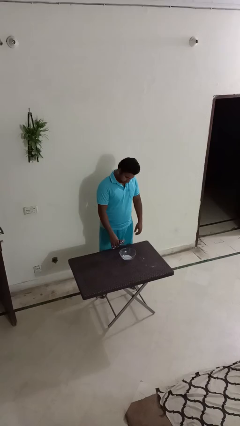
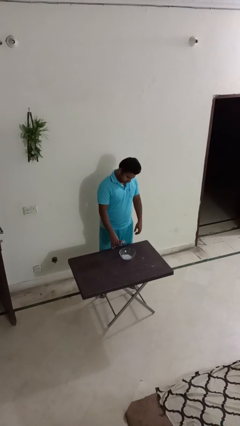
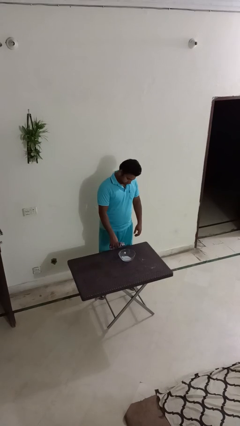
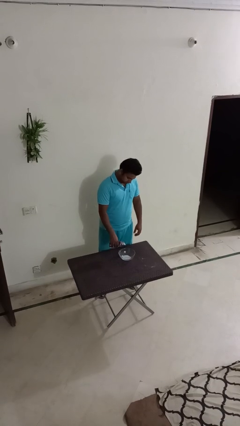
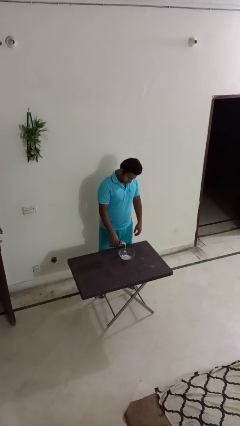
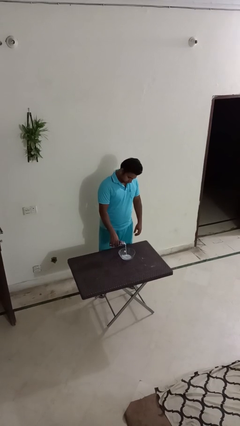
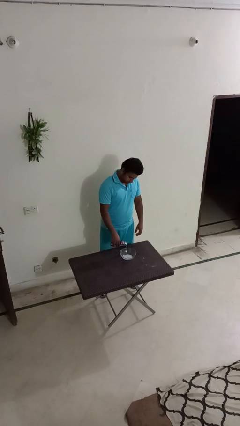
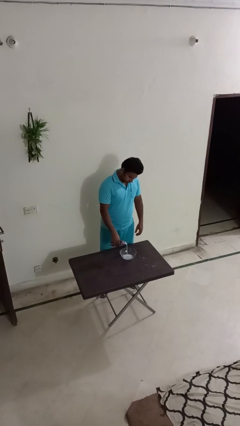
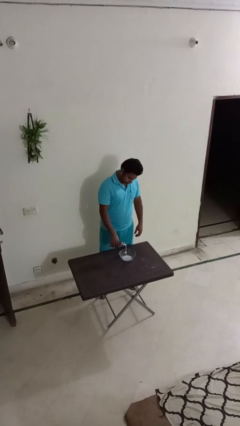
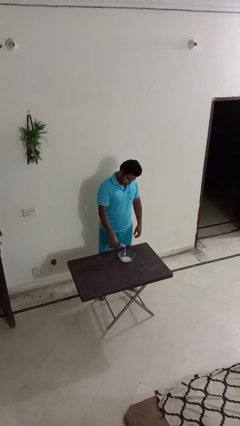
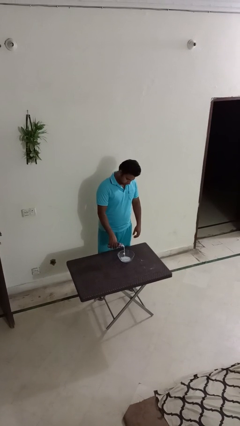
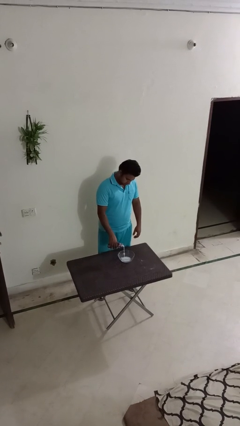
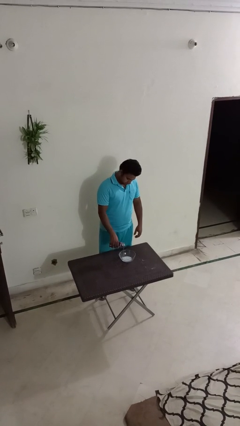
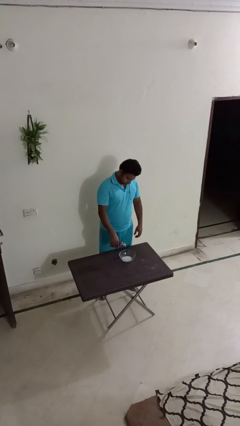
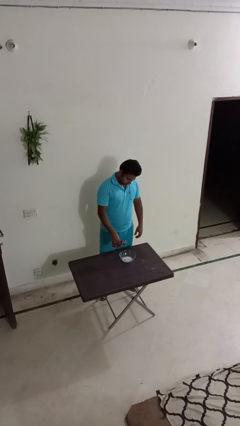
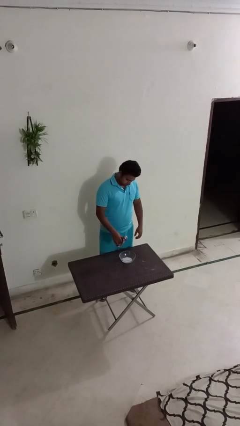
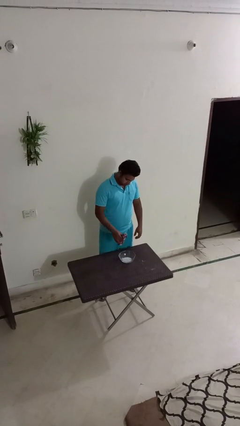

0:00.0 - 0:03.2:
person pours into bowl

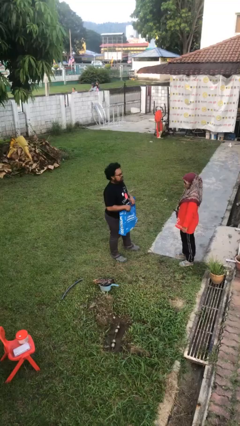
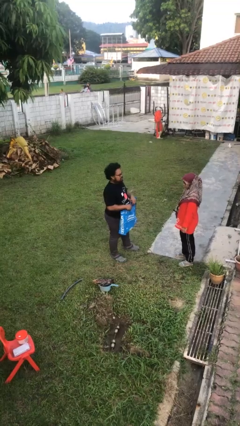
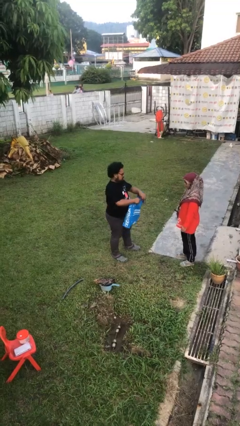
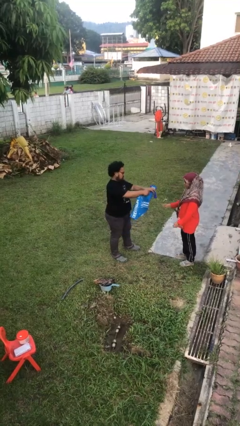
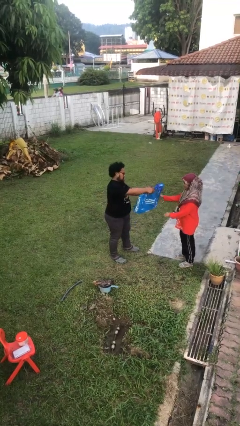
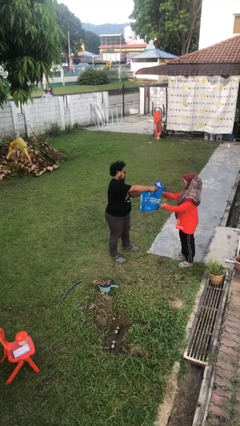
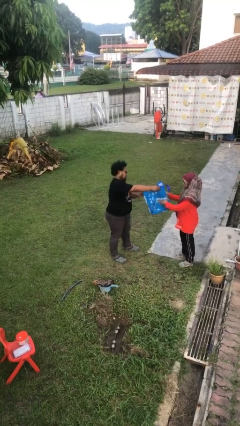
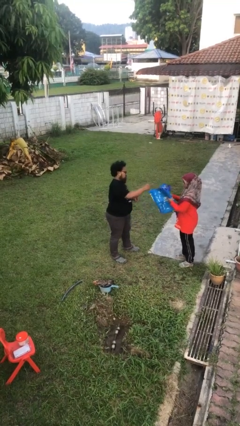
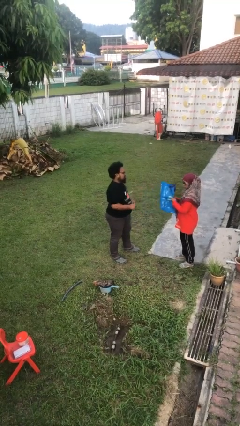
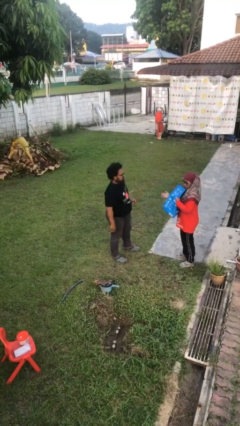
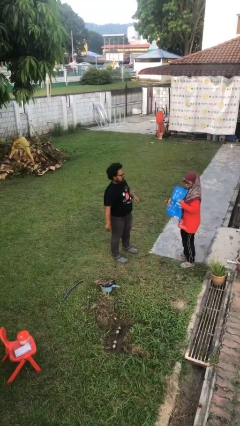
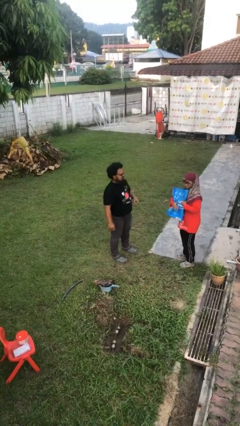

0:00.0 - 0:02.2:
person transfers object to person

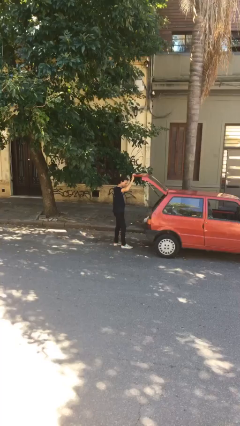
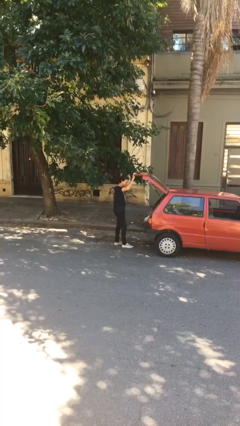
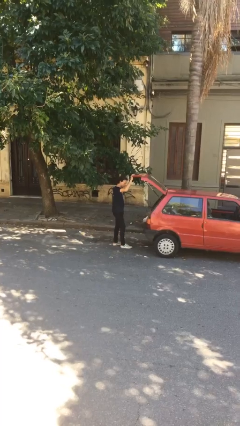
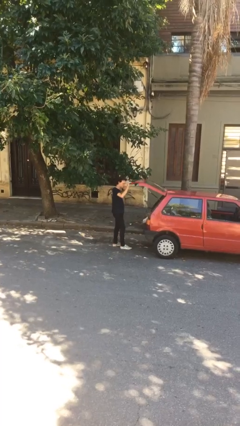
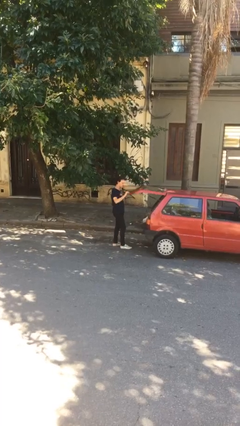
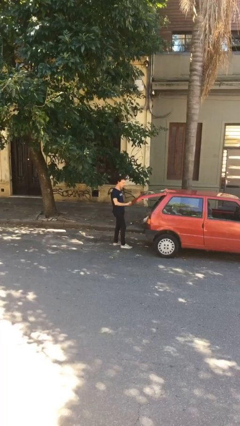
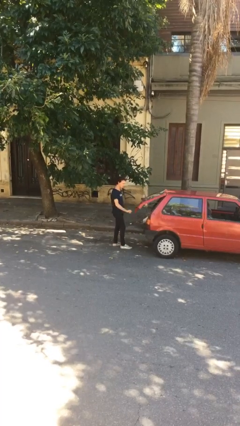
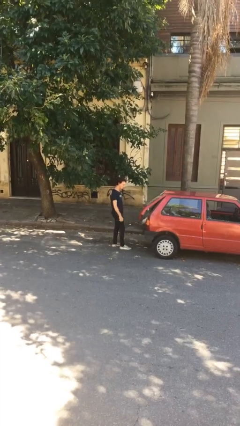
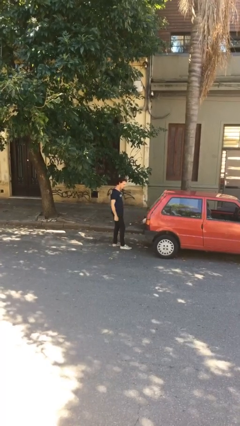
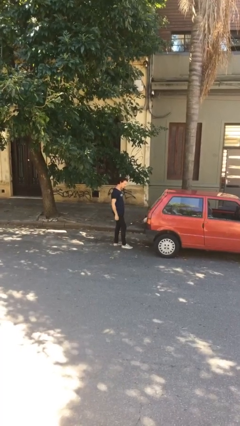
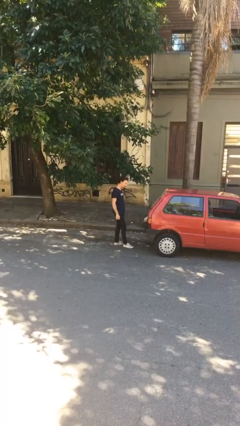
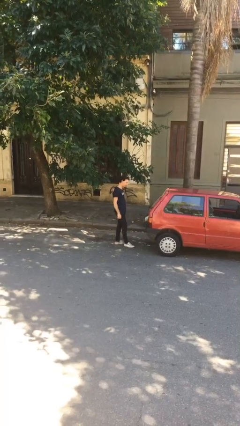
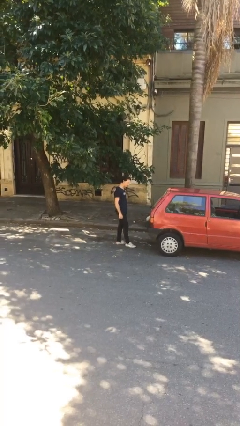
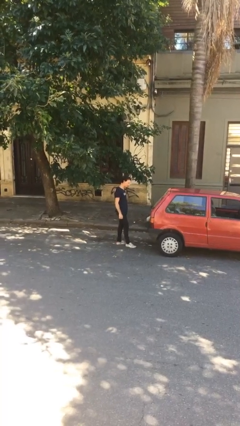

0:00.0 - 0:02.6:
person closes car trunk

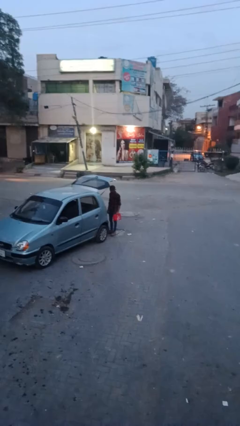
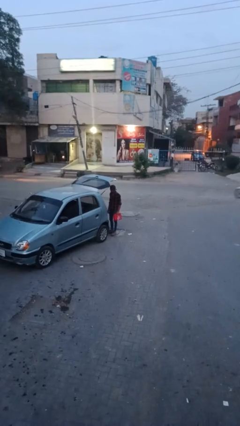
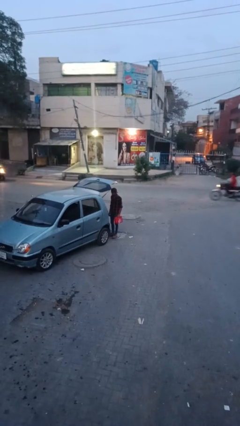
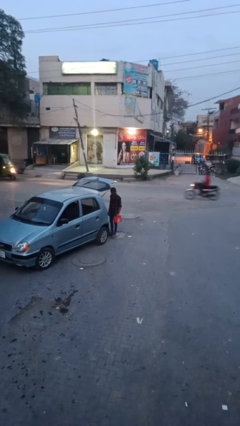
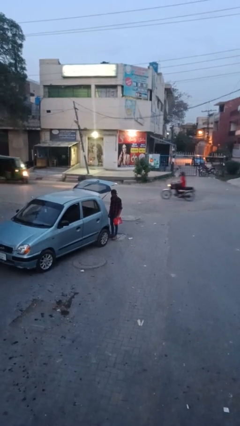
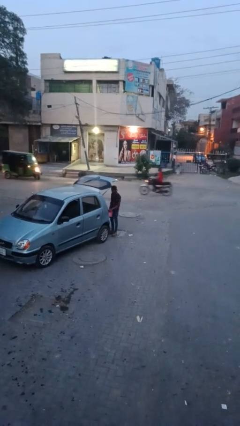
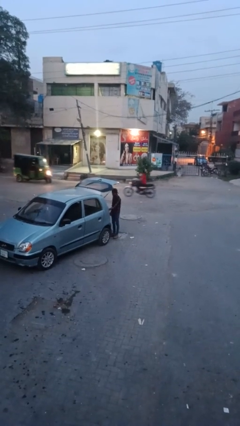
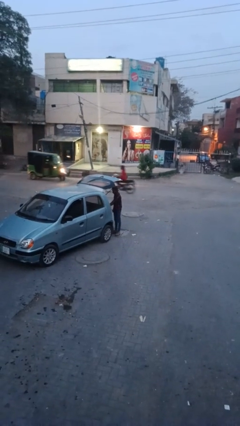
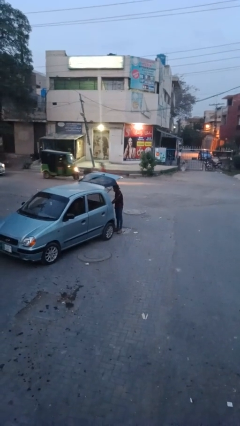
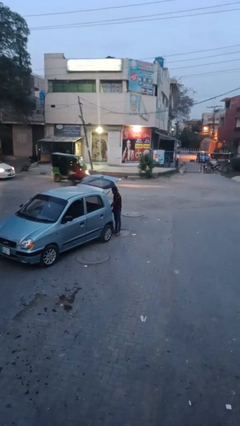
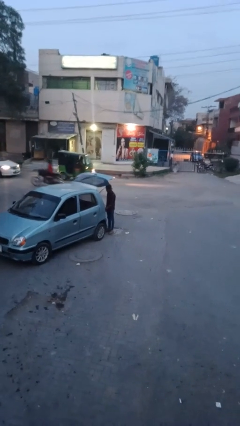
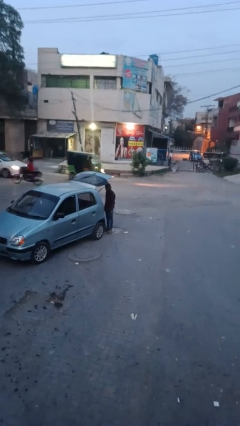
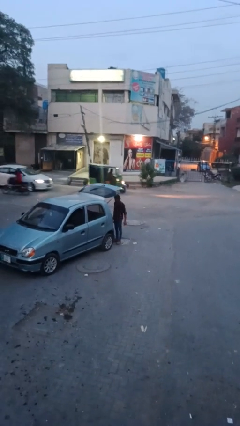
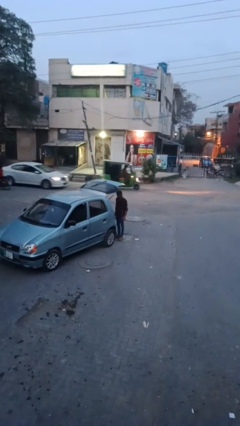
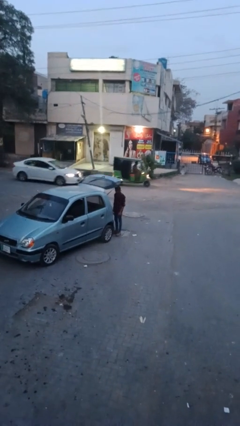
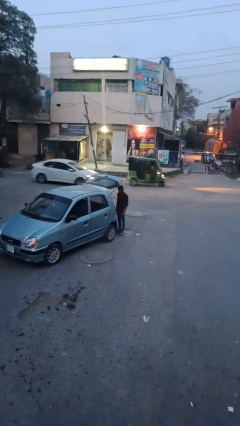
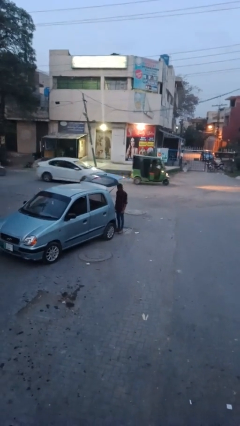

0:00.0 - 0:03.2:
person loads car

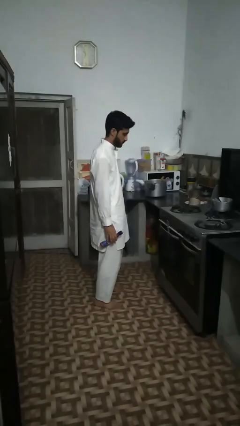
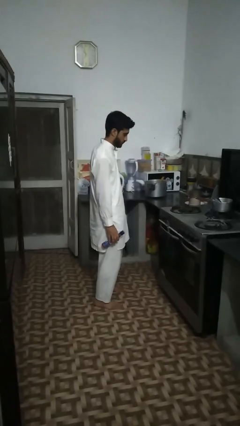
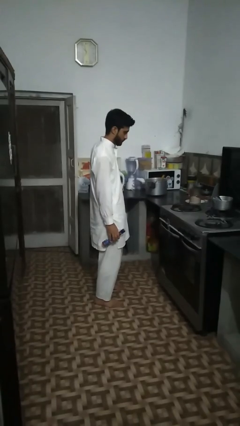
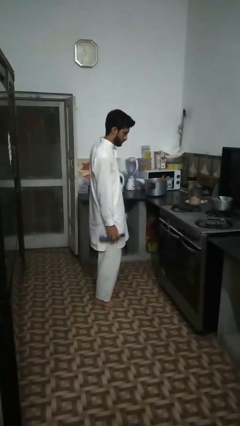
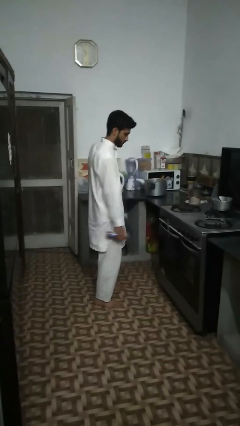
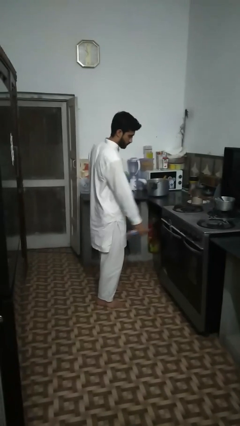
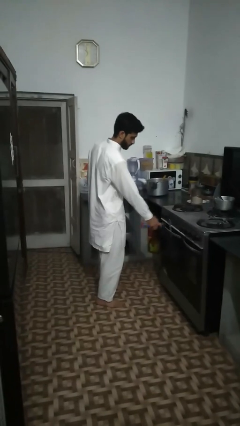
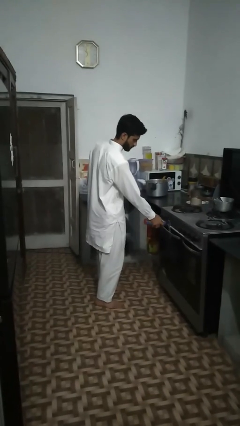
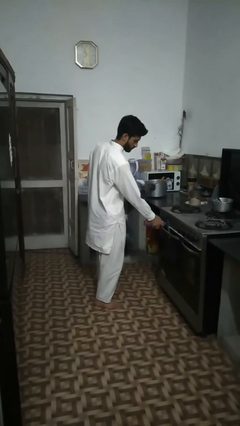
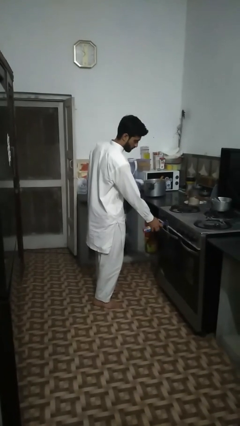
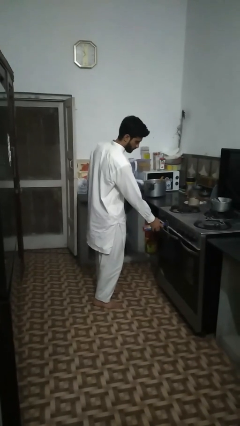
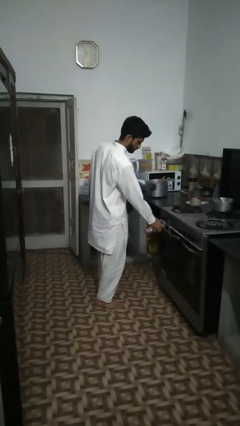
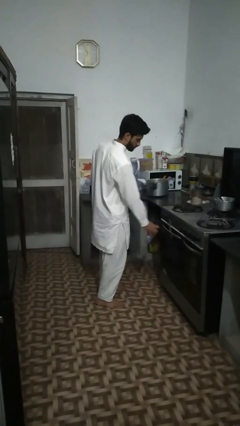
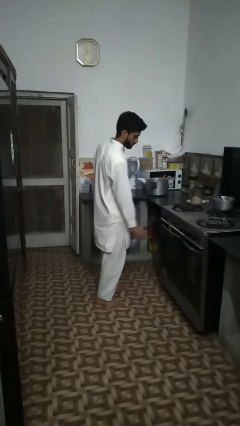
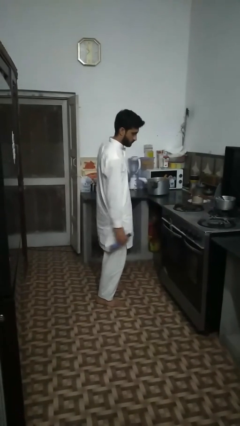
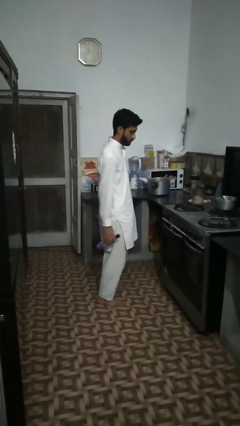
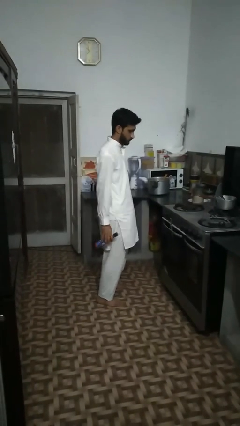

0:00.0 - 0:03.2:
person opens can with can opener

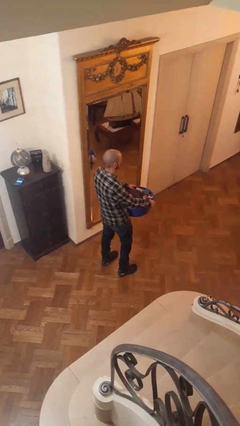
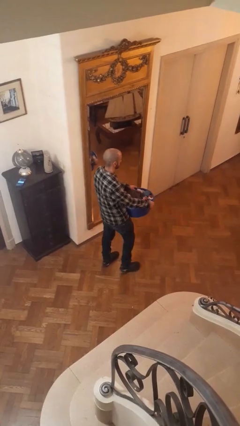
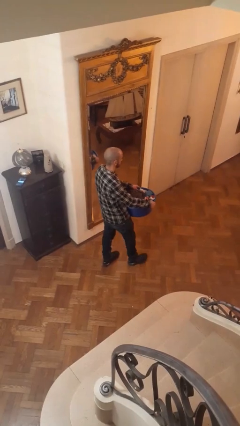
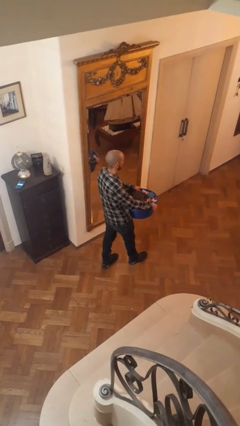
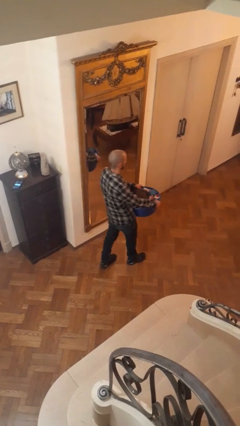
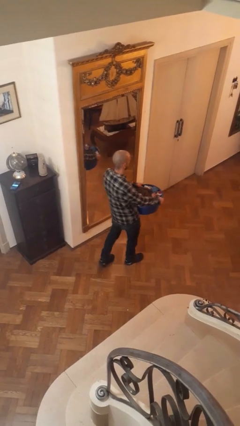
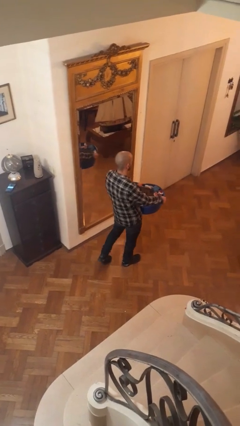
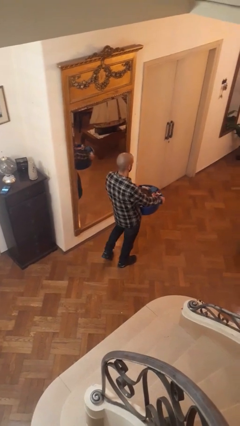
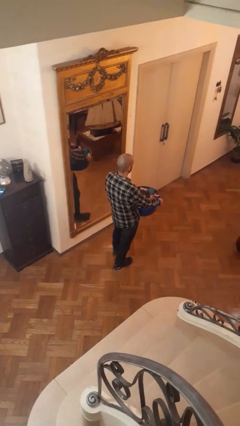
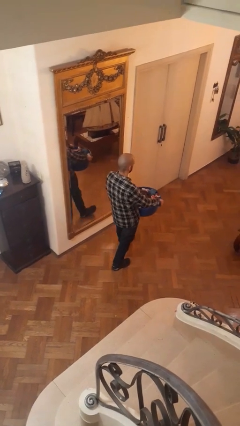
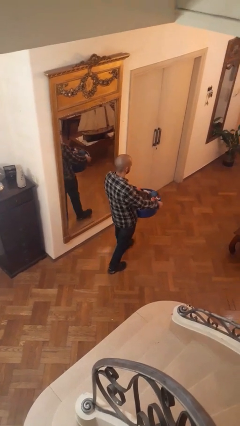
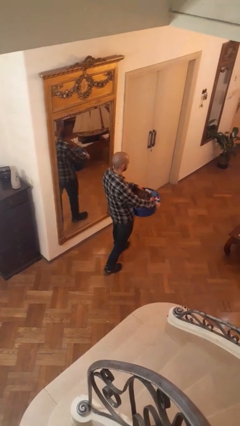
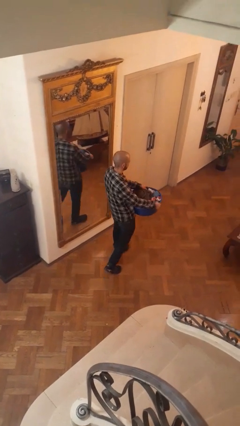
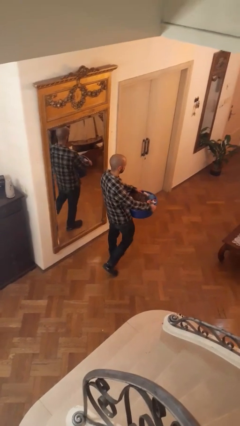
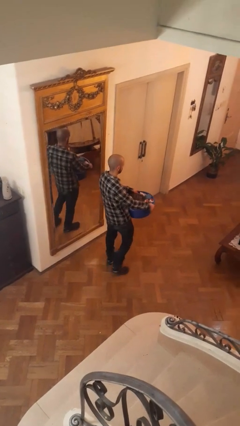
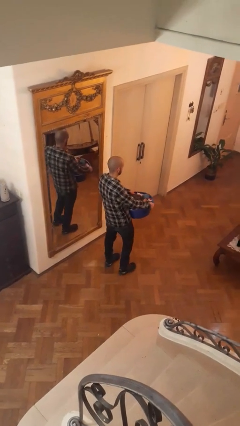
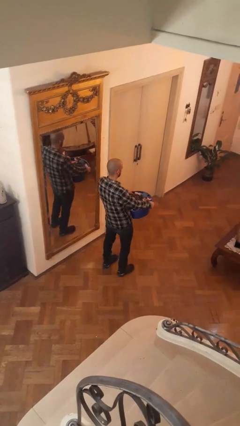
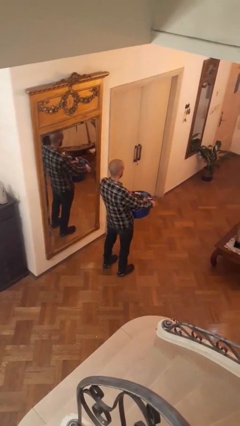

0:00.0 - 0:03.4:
person carries laundry basket
